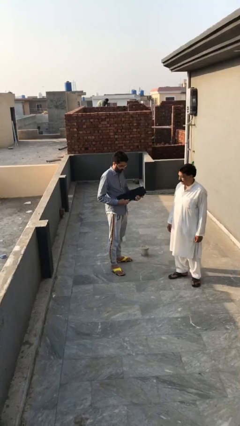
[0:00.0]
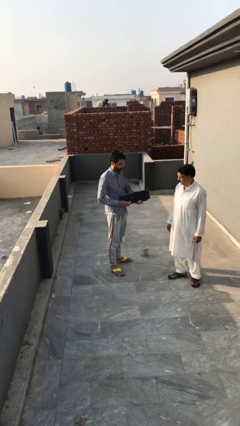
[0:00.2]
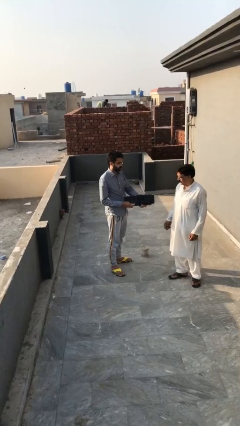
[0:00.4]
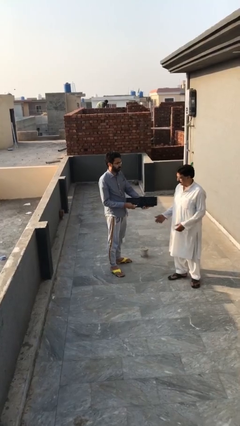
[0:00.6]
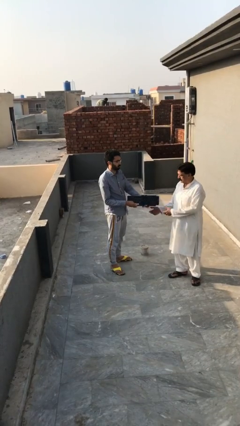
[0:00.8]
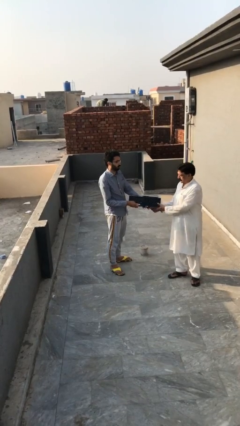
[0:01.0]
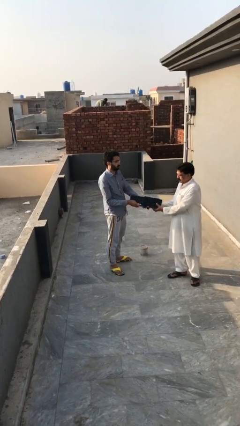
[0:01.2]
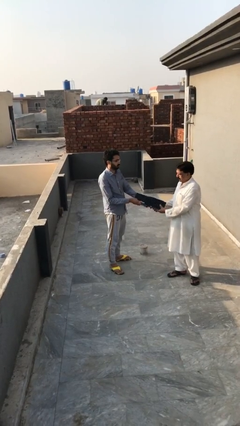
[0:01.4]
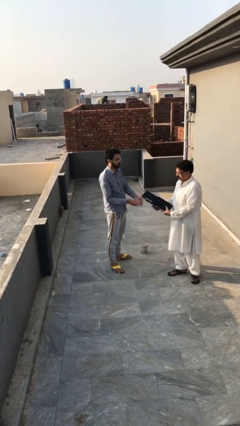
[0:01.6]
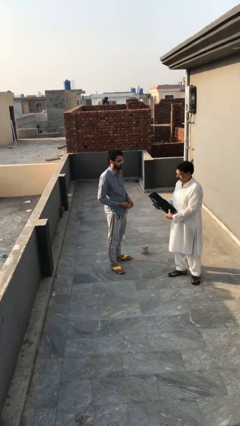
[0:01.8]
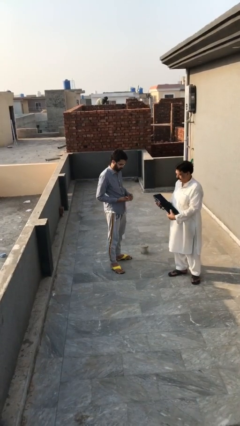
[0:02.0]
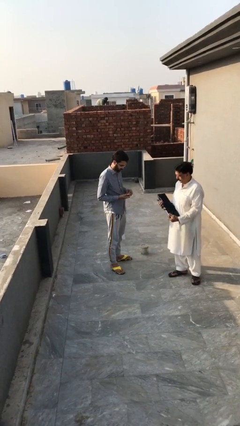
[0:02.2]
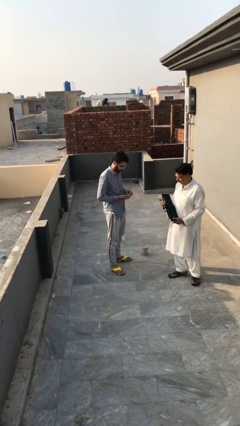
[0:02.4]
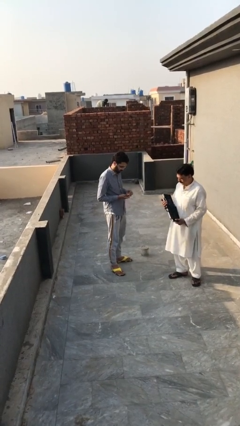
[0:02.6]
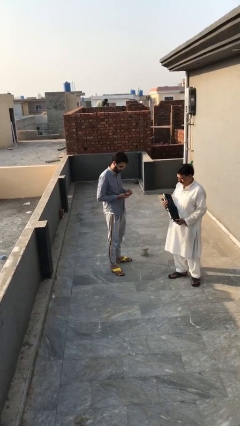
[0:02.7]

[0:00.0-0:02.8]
person transfers object to person

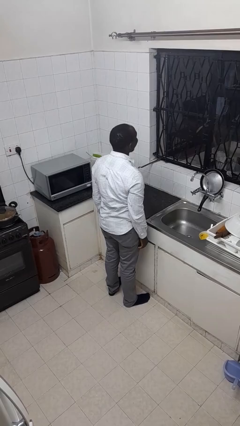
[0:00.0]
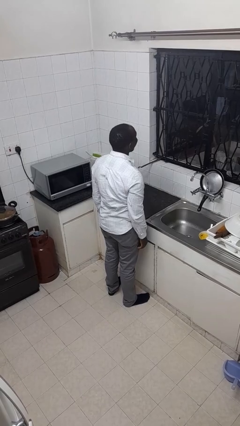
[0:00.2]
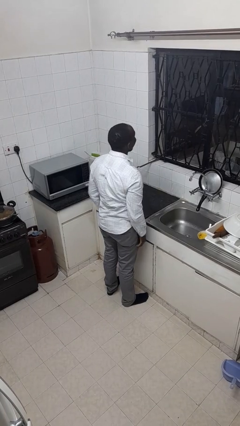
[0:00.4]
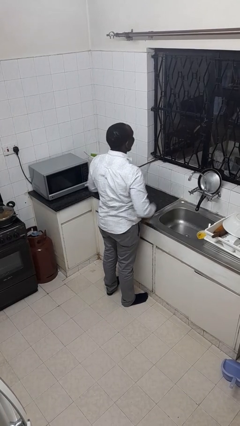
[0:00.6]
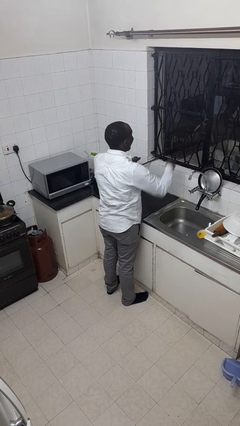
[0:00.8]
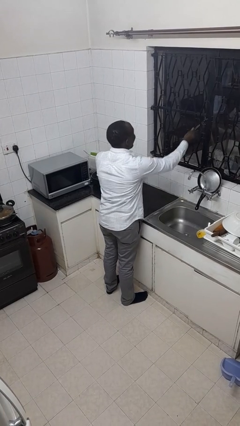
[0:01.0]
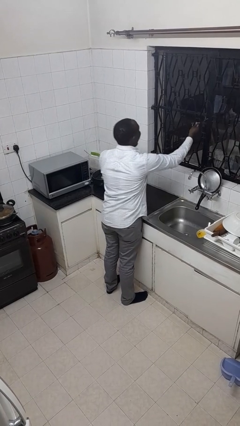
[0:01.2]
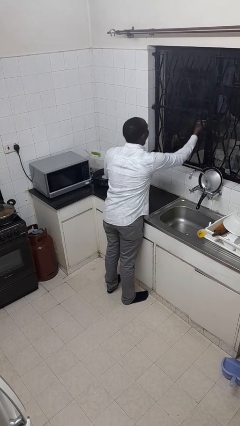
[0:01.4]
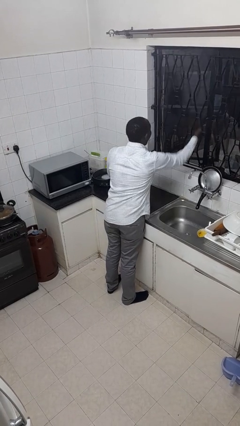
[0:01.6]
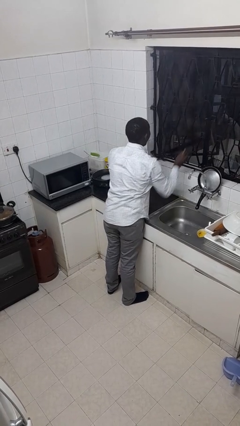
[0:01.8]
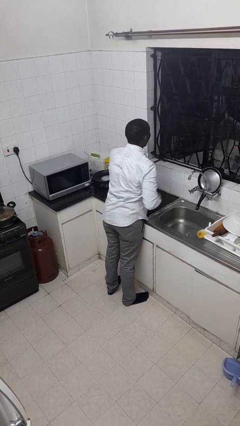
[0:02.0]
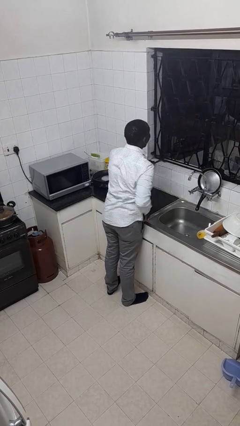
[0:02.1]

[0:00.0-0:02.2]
person opens home window

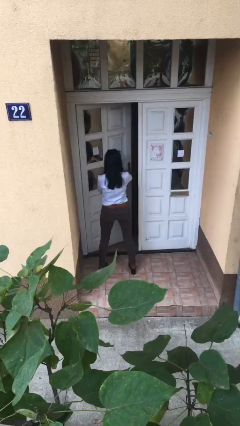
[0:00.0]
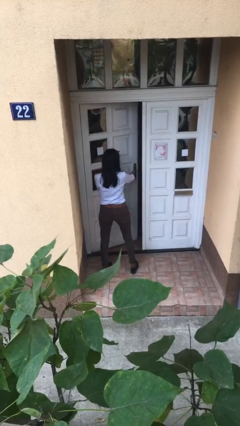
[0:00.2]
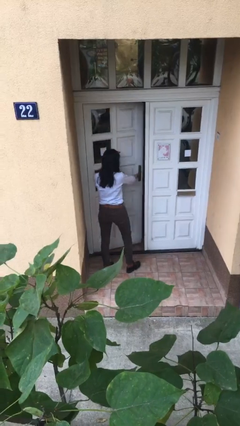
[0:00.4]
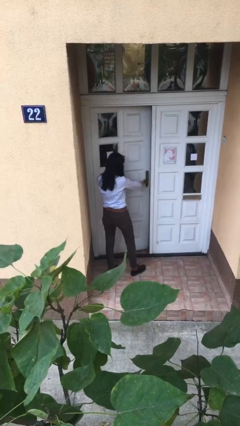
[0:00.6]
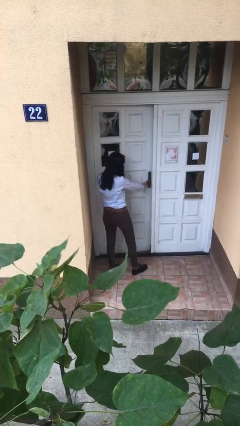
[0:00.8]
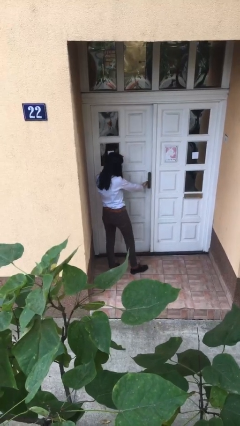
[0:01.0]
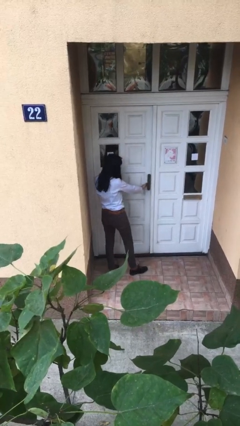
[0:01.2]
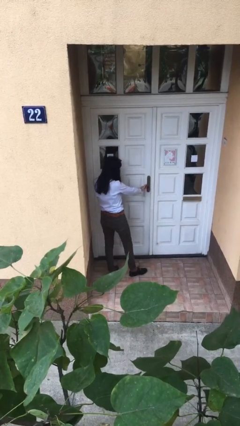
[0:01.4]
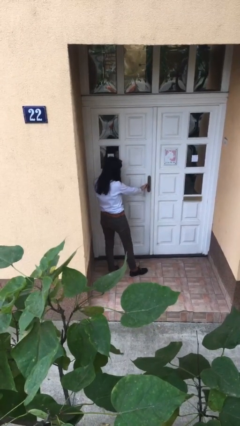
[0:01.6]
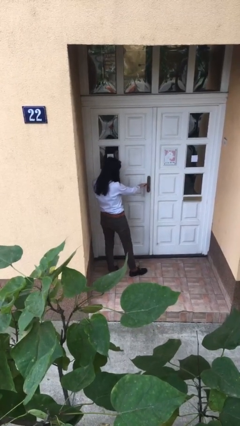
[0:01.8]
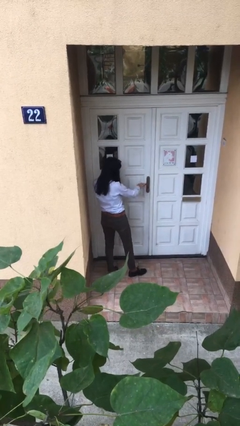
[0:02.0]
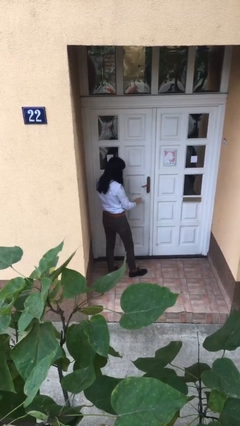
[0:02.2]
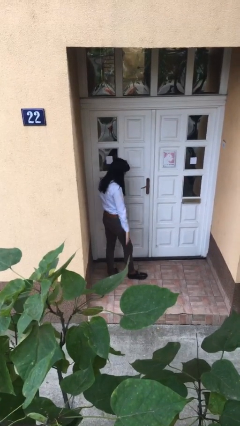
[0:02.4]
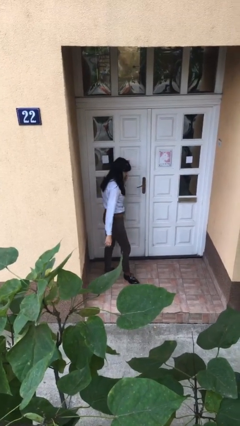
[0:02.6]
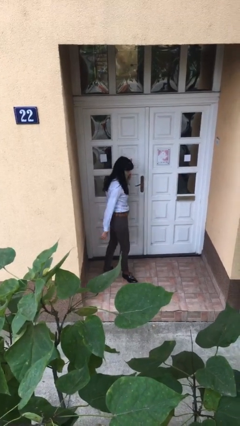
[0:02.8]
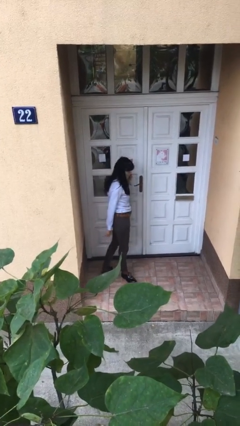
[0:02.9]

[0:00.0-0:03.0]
person closes facility door

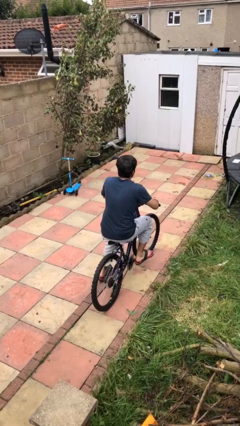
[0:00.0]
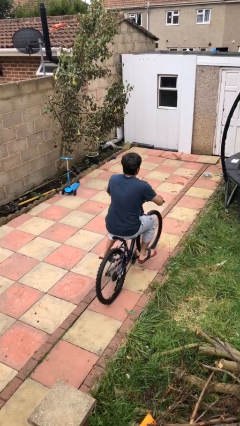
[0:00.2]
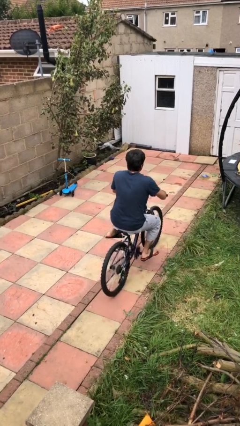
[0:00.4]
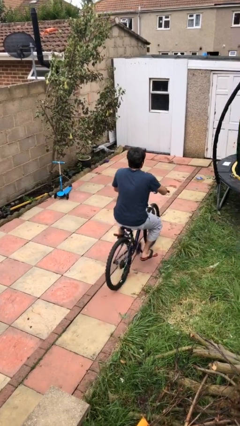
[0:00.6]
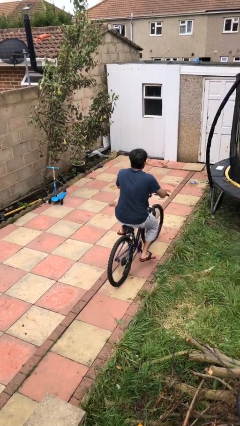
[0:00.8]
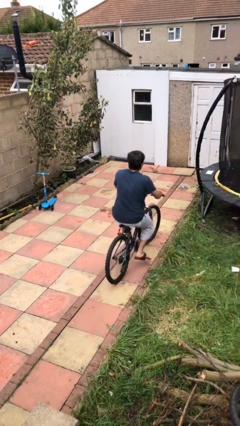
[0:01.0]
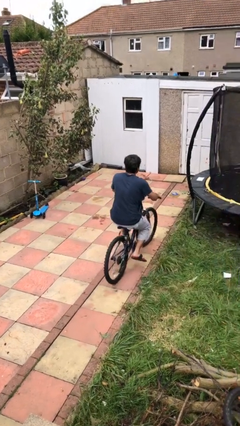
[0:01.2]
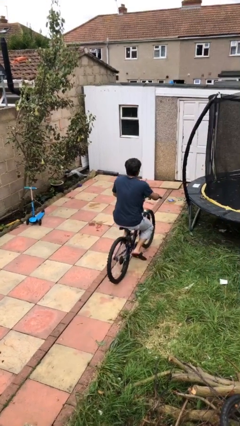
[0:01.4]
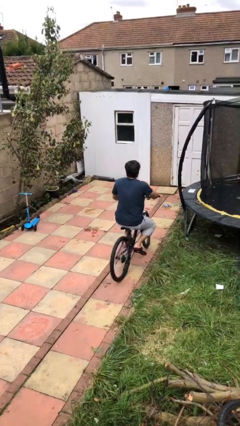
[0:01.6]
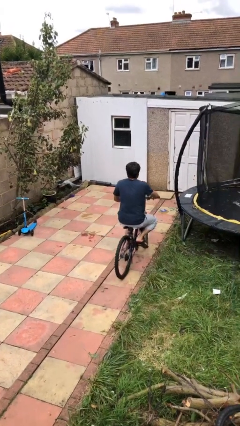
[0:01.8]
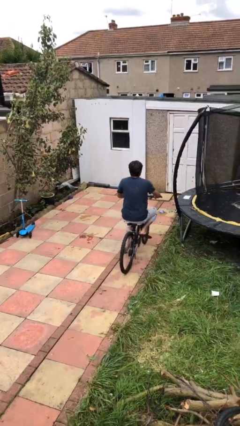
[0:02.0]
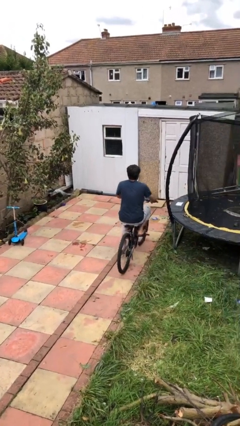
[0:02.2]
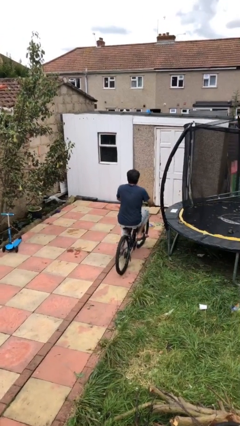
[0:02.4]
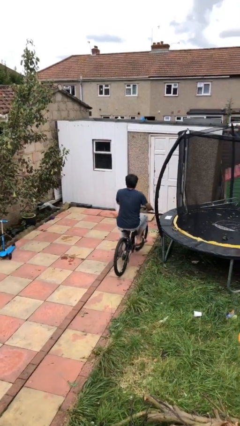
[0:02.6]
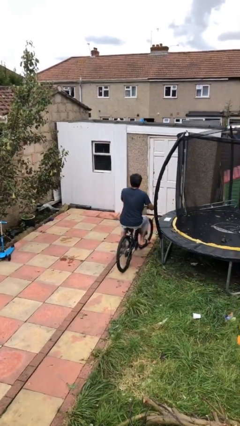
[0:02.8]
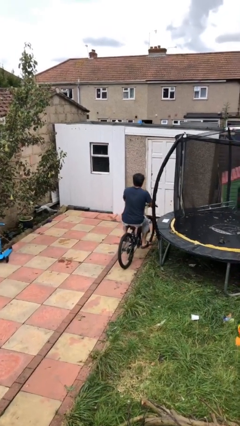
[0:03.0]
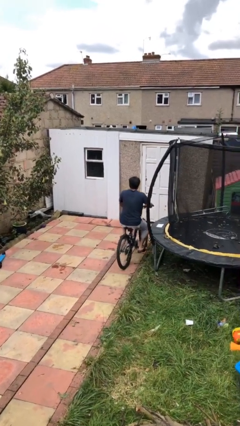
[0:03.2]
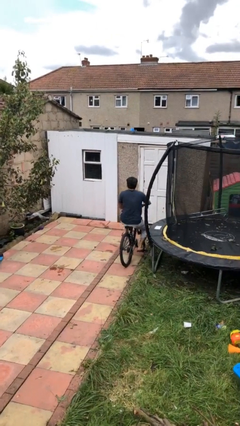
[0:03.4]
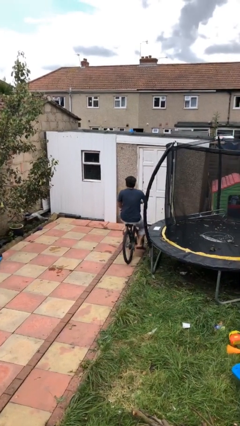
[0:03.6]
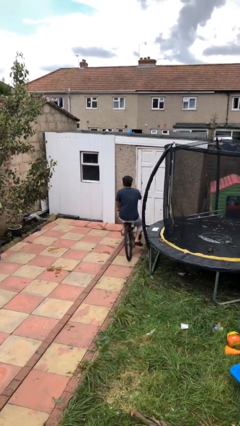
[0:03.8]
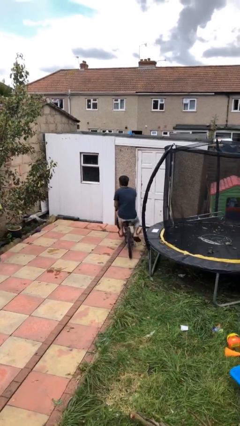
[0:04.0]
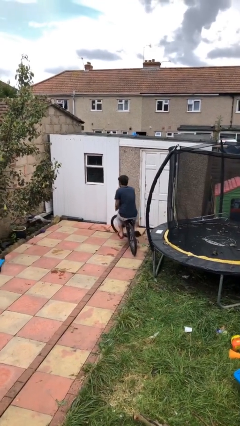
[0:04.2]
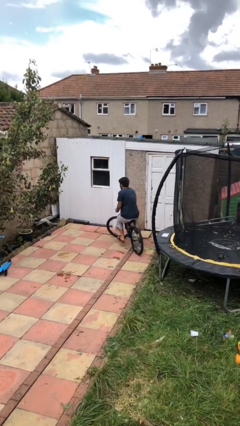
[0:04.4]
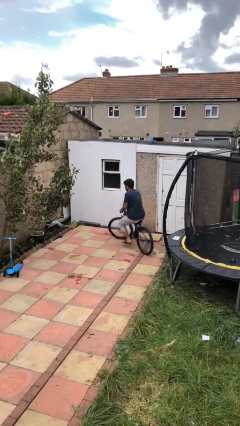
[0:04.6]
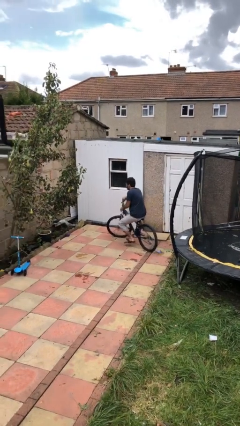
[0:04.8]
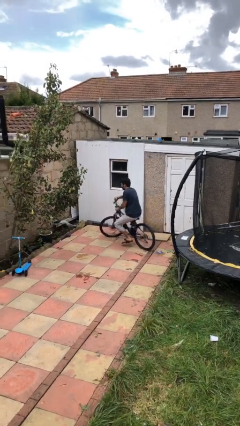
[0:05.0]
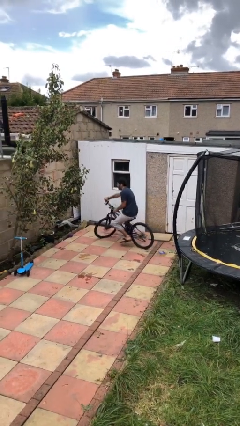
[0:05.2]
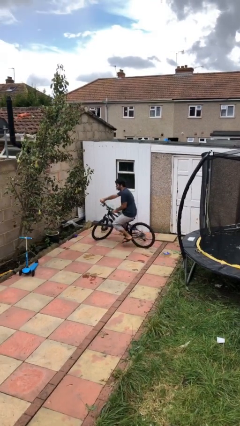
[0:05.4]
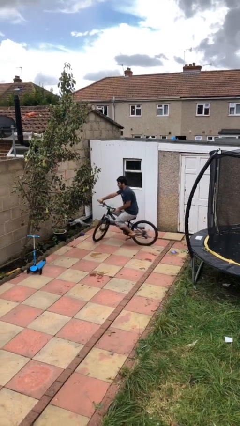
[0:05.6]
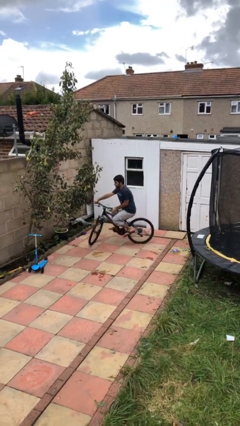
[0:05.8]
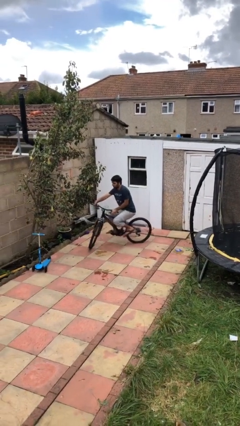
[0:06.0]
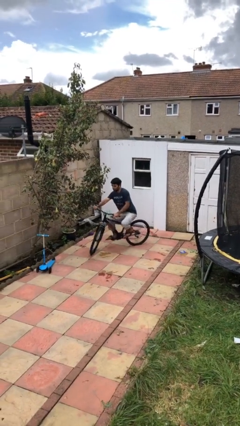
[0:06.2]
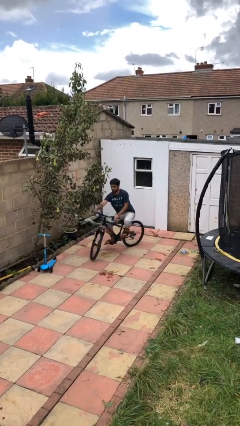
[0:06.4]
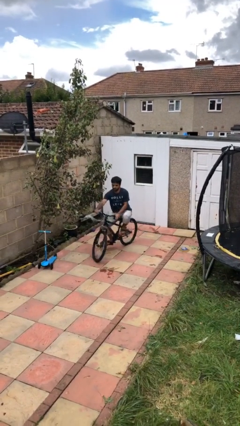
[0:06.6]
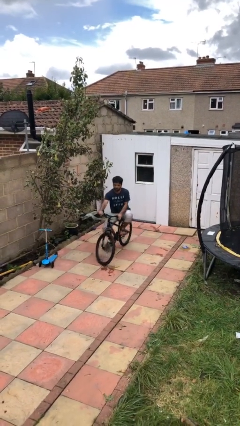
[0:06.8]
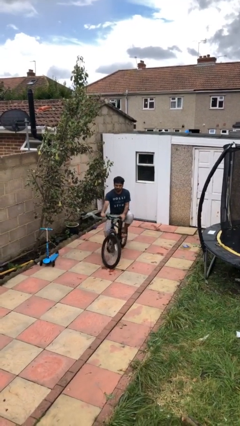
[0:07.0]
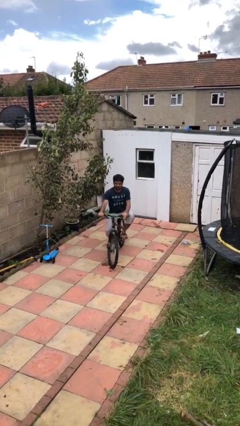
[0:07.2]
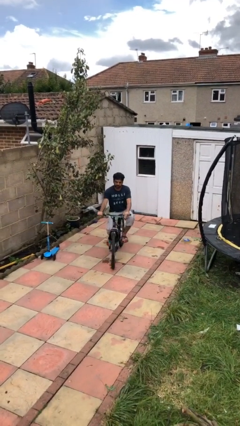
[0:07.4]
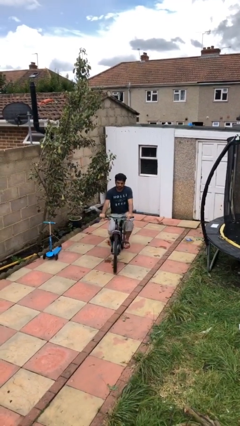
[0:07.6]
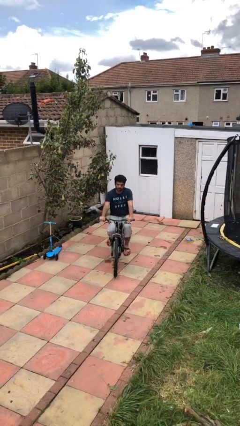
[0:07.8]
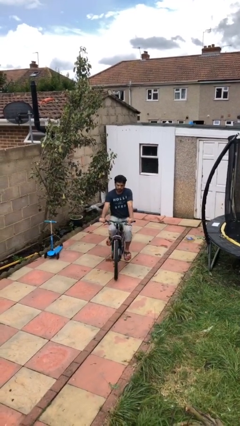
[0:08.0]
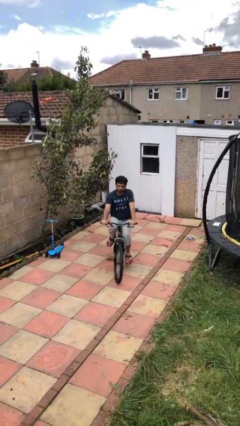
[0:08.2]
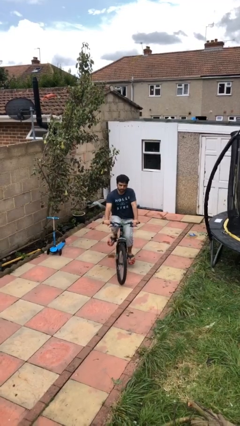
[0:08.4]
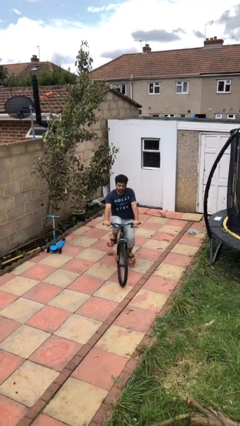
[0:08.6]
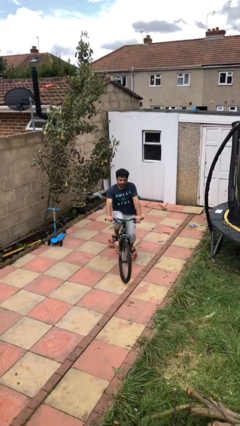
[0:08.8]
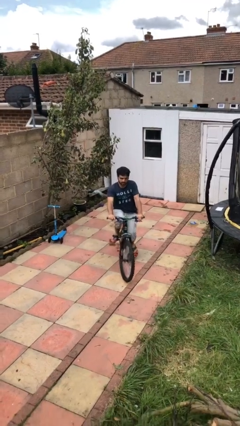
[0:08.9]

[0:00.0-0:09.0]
person rides bicycle

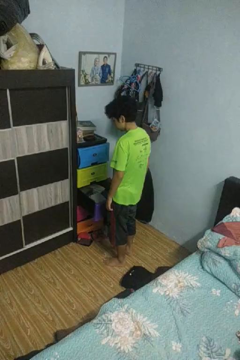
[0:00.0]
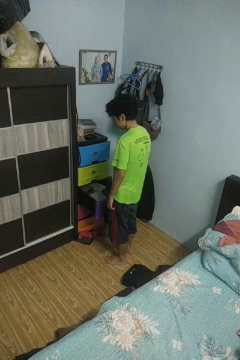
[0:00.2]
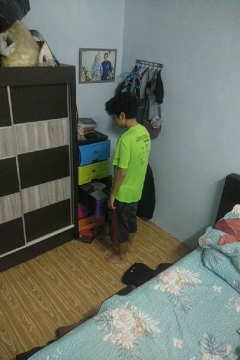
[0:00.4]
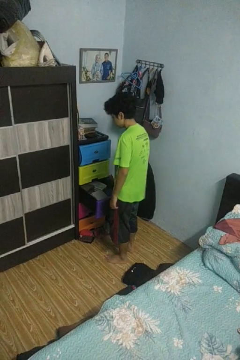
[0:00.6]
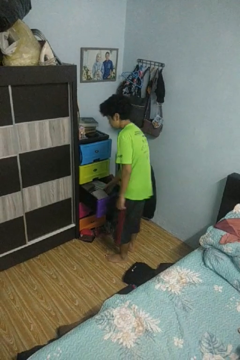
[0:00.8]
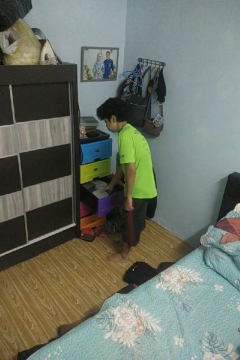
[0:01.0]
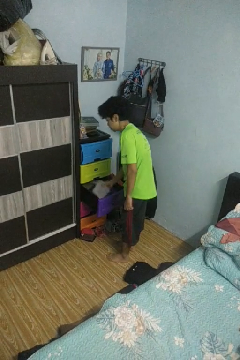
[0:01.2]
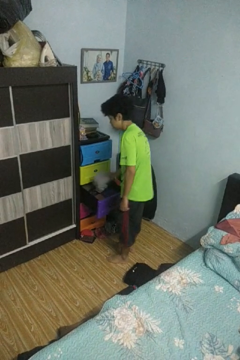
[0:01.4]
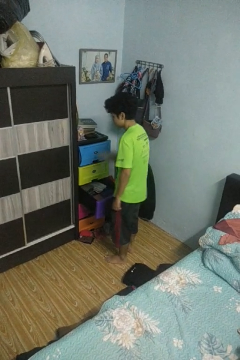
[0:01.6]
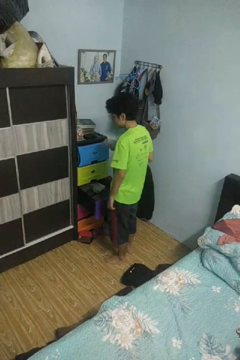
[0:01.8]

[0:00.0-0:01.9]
person takes clothes from dresser
